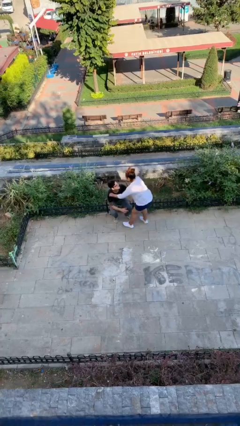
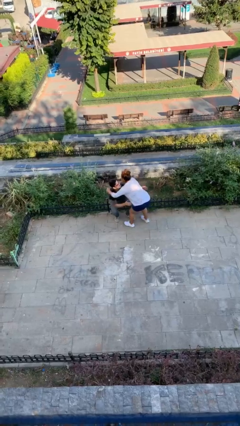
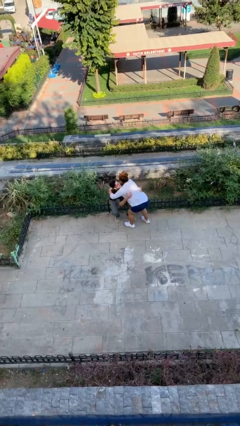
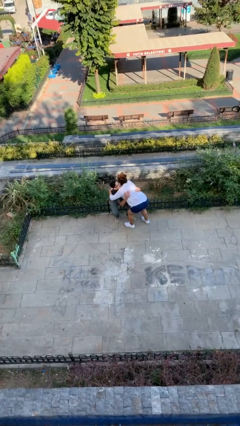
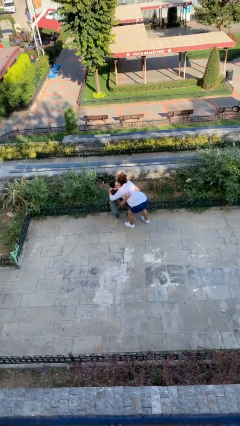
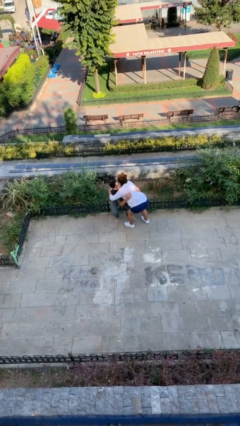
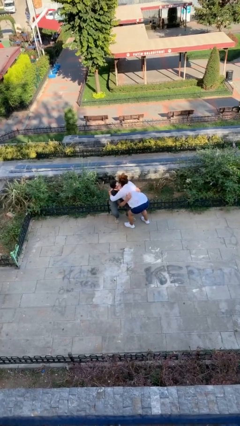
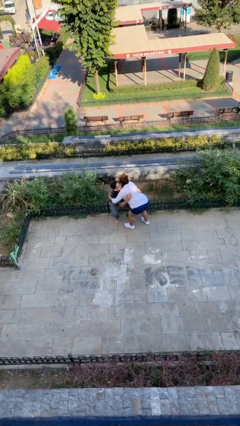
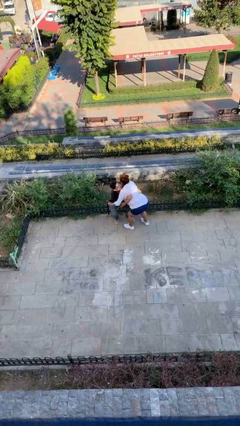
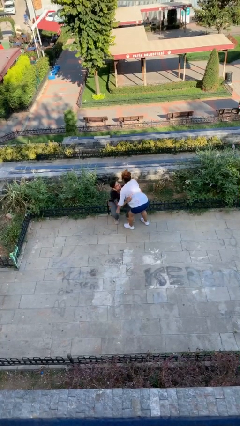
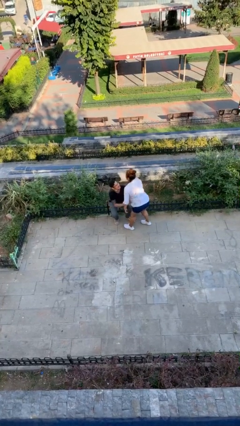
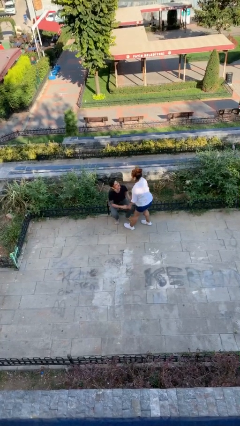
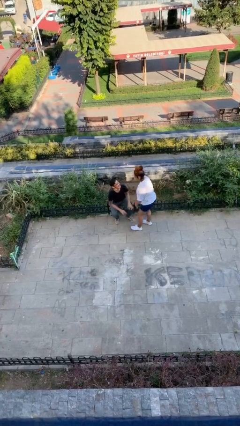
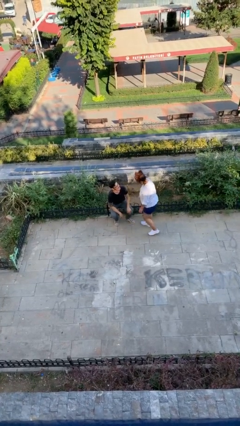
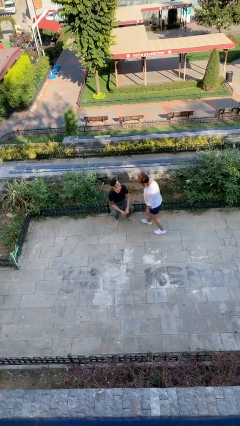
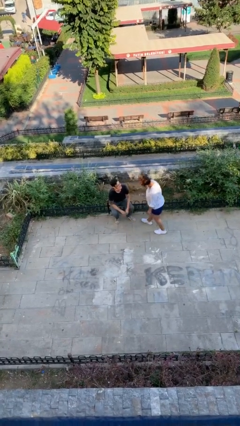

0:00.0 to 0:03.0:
person embraces person

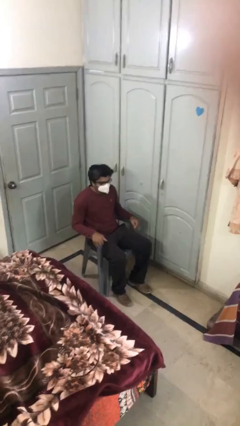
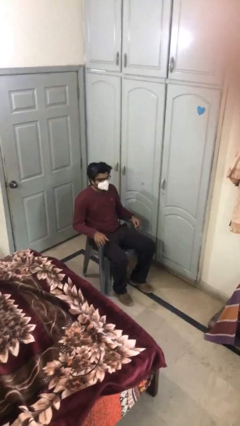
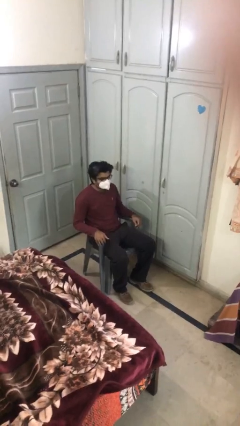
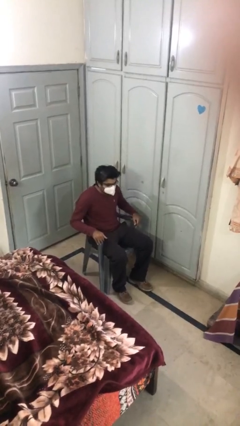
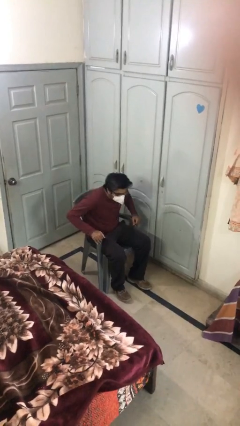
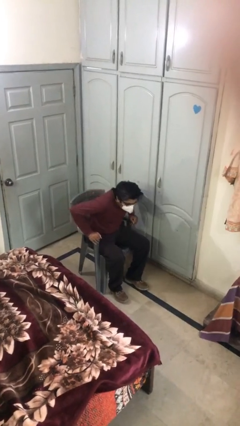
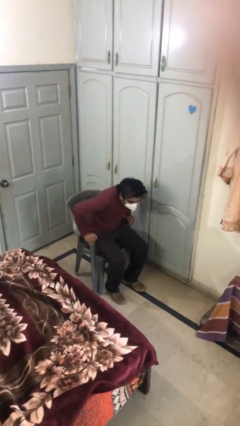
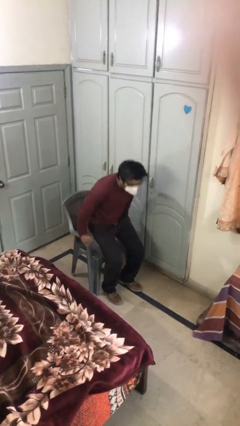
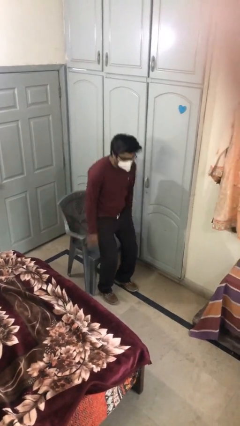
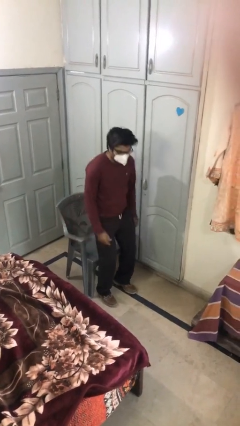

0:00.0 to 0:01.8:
person stands up

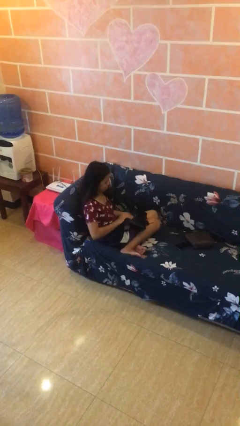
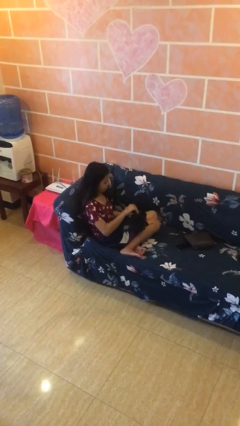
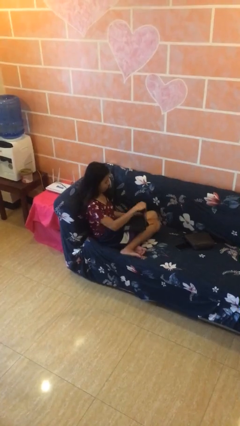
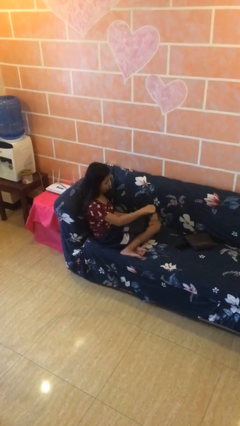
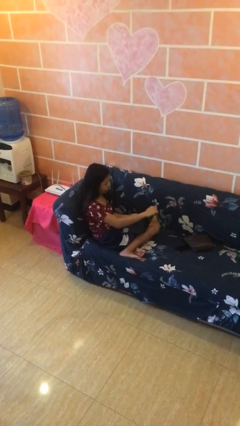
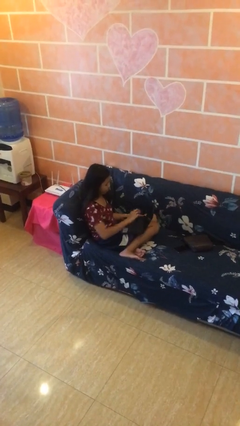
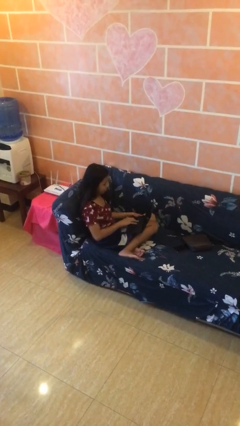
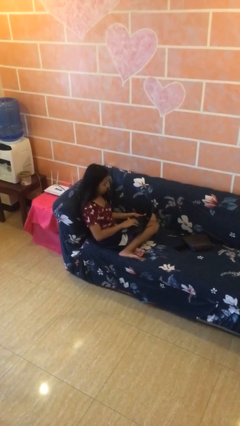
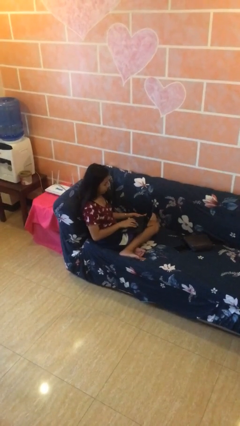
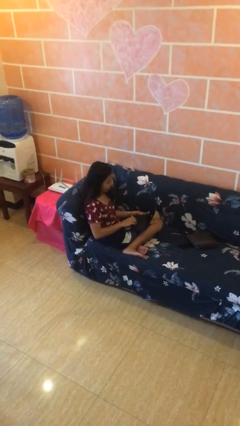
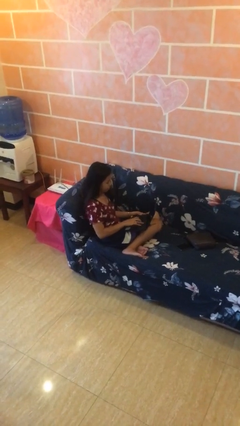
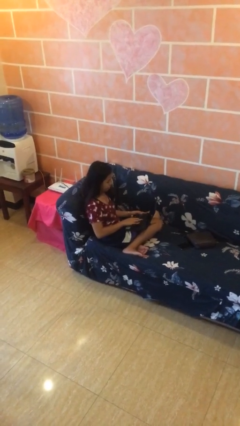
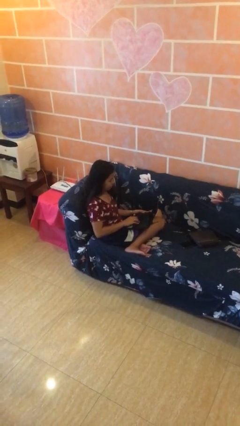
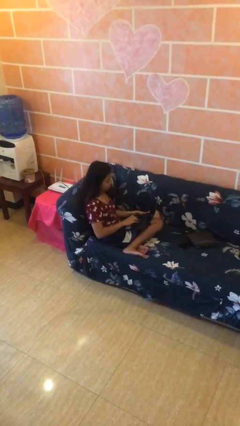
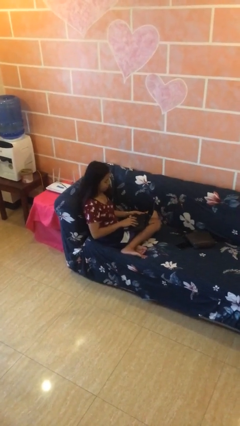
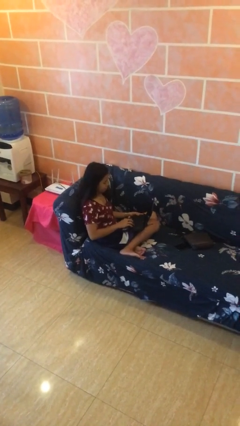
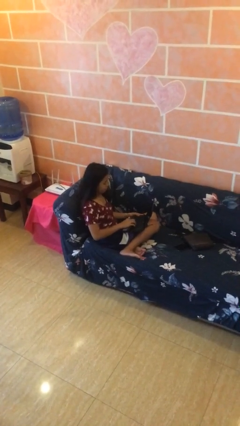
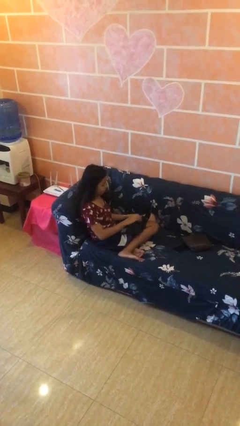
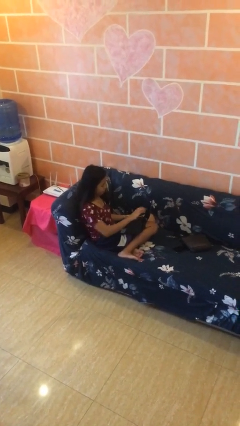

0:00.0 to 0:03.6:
person interacts with laptop

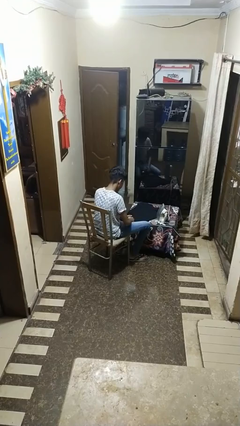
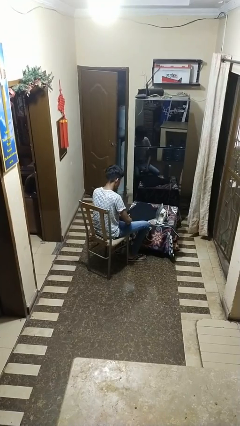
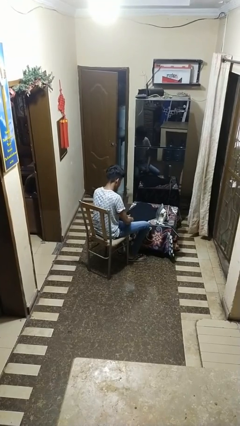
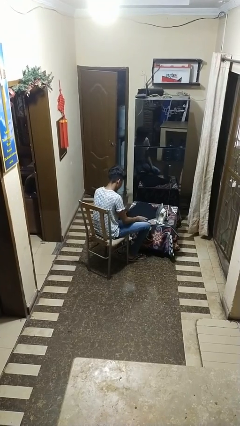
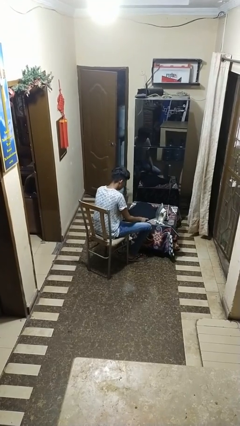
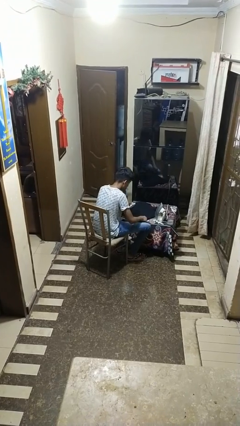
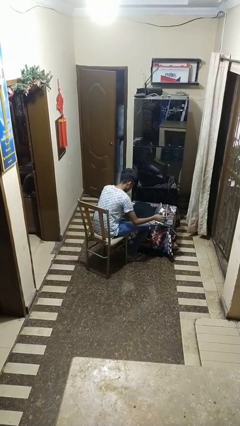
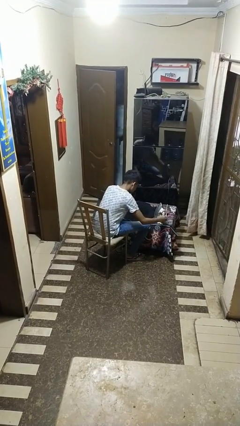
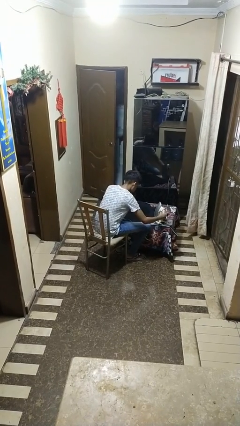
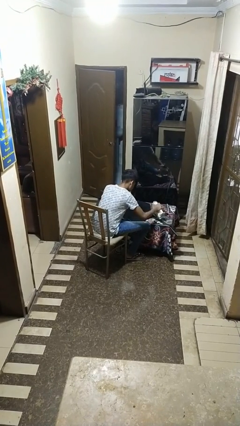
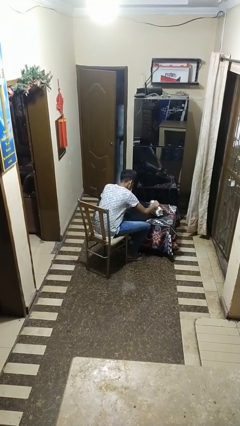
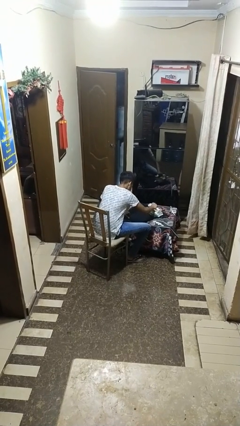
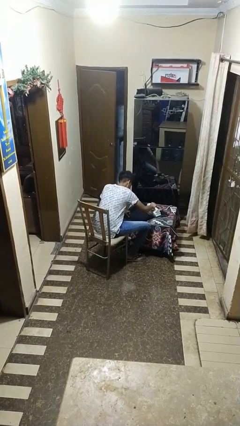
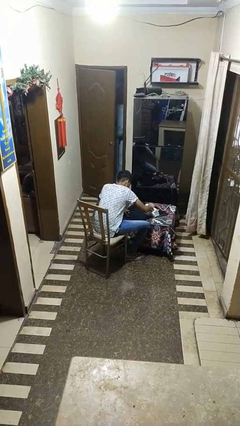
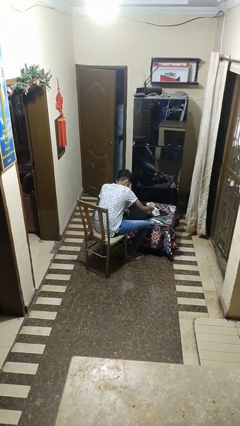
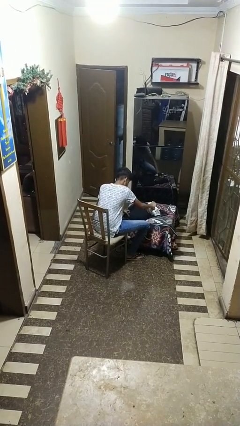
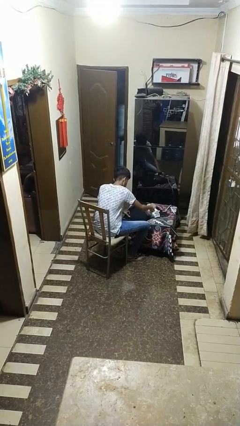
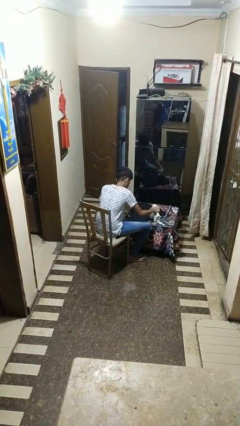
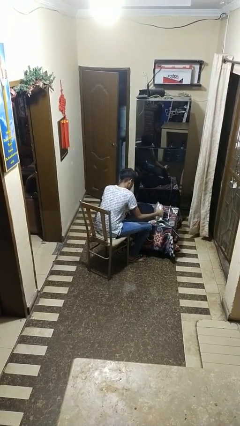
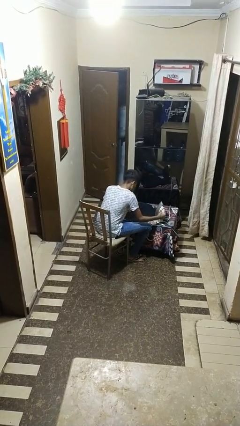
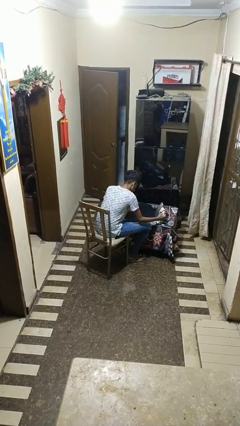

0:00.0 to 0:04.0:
person irons clothes

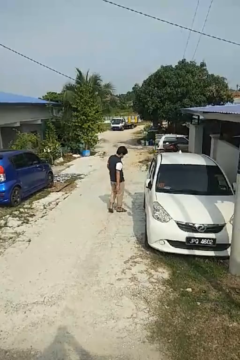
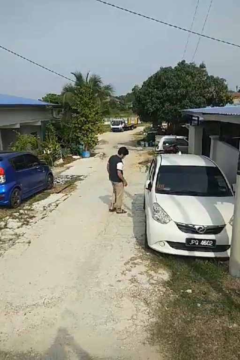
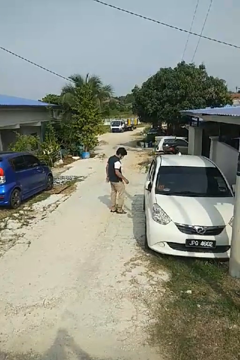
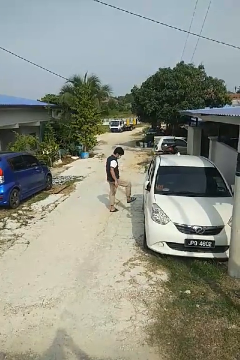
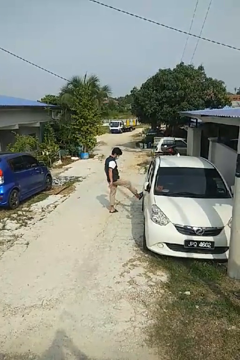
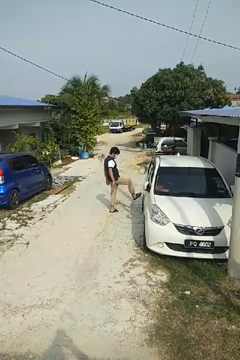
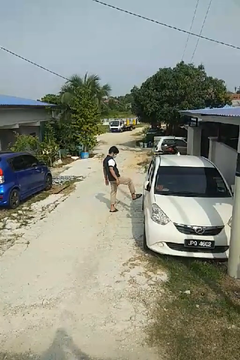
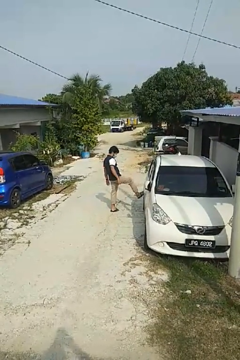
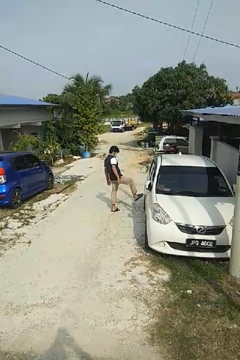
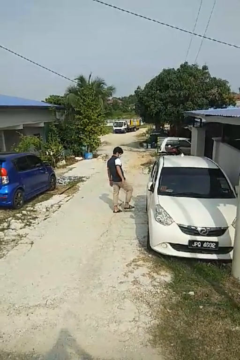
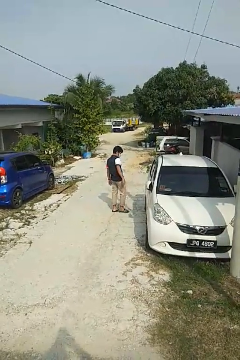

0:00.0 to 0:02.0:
person kicks car tires

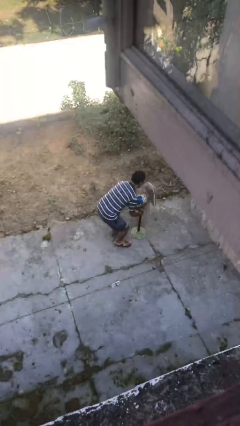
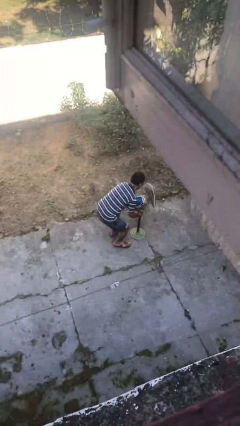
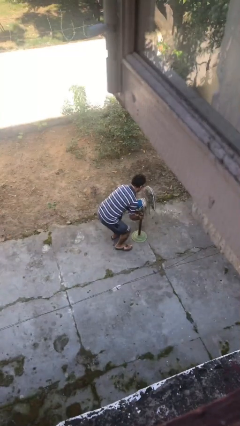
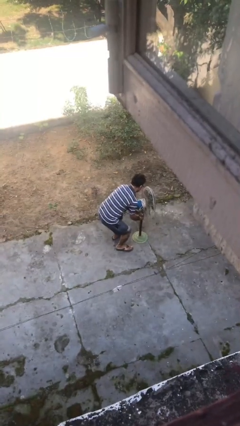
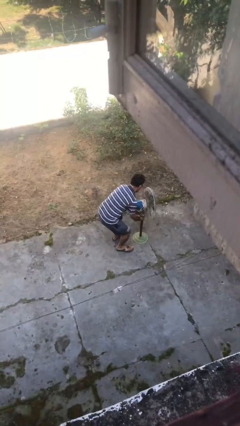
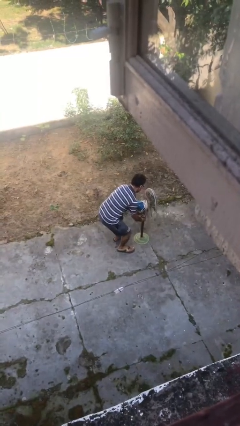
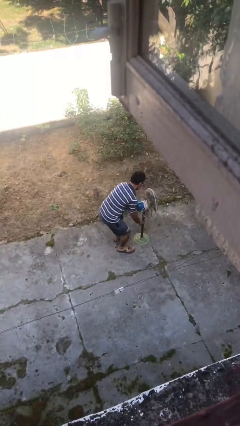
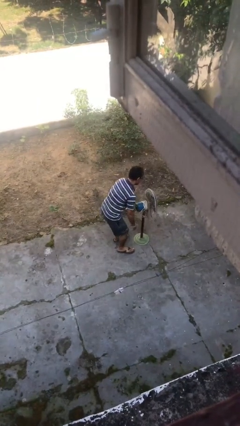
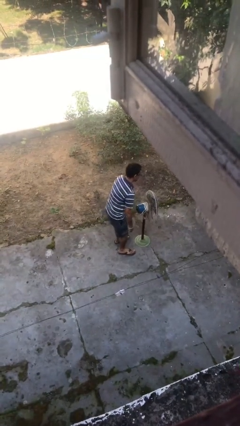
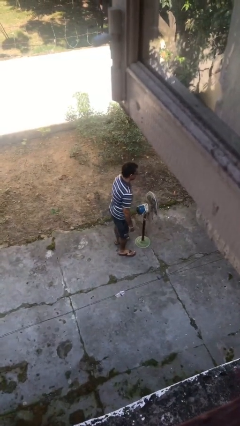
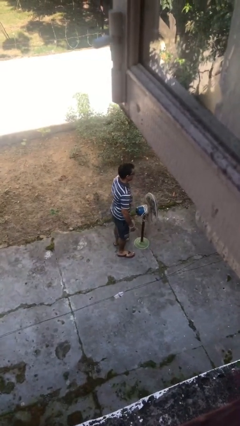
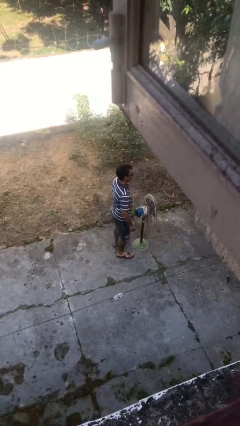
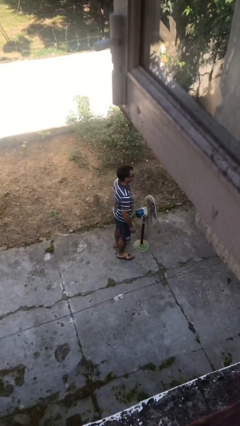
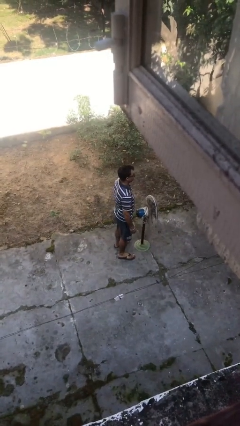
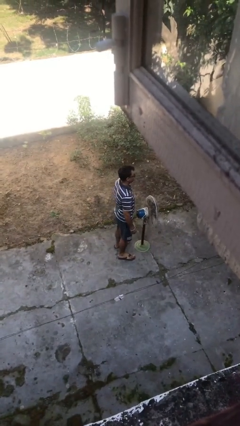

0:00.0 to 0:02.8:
person puts down object on floor

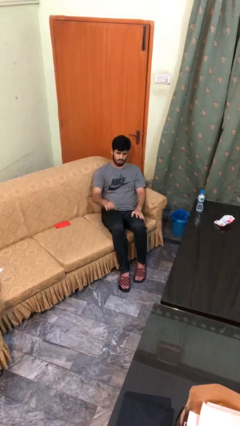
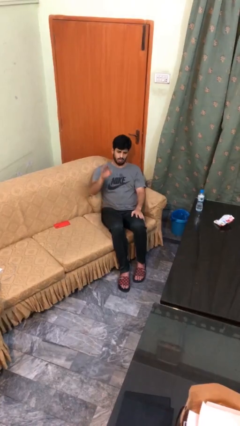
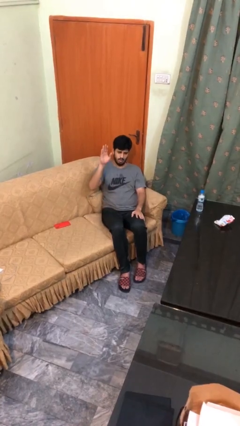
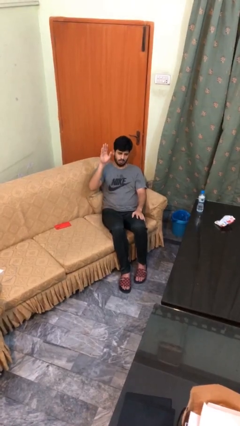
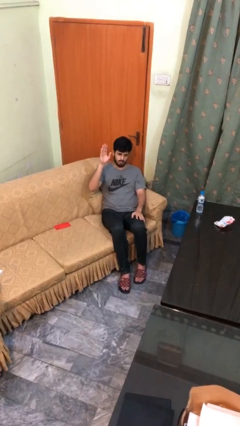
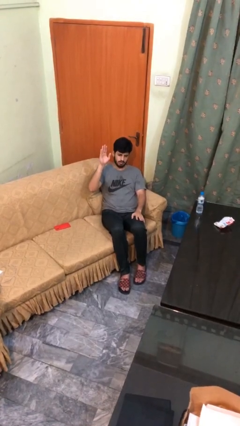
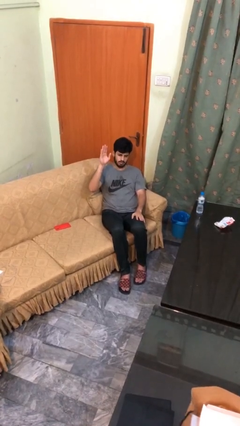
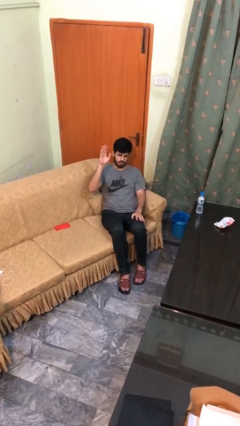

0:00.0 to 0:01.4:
person gestures raise hand
